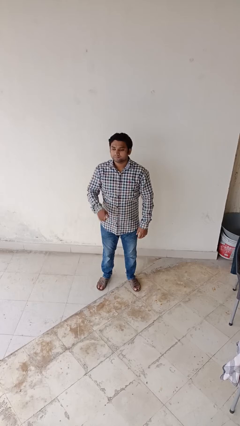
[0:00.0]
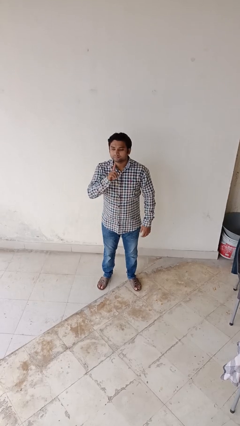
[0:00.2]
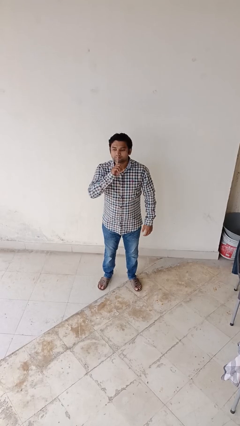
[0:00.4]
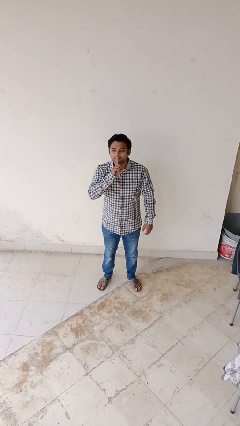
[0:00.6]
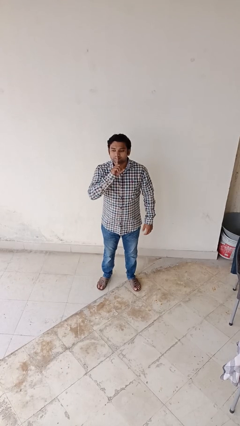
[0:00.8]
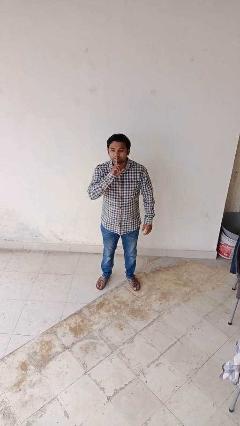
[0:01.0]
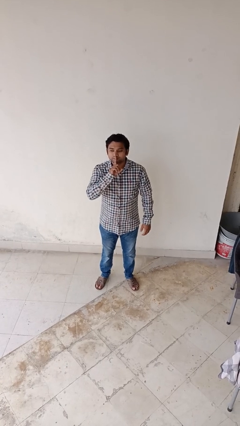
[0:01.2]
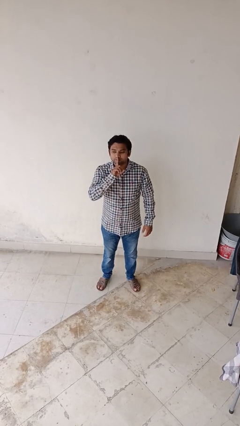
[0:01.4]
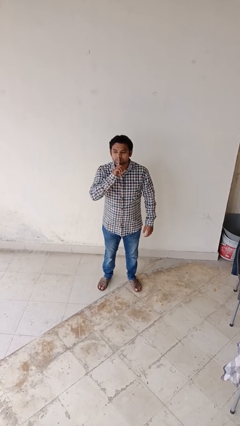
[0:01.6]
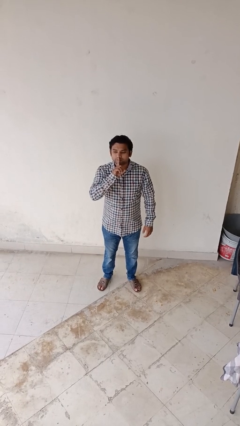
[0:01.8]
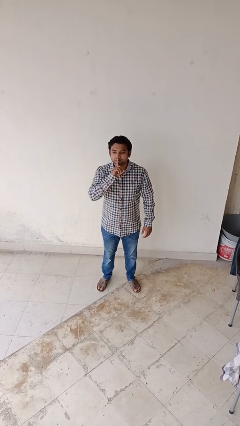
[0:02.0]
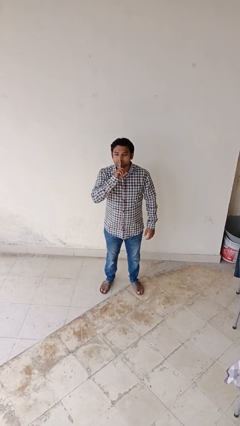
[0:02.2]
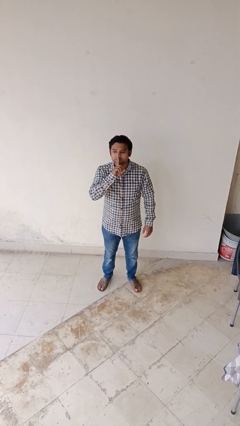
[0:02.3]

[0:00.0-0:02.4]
person gestures be quiet

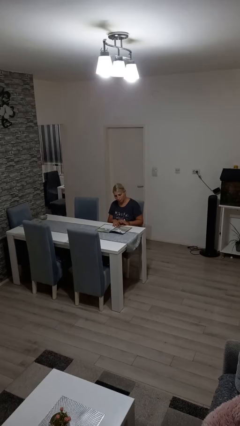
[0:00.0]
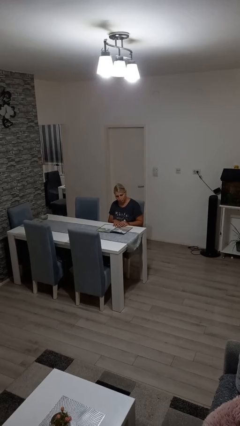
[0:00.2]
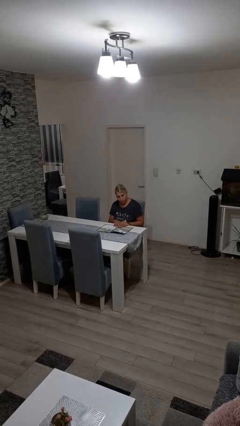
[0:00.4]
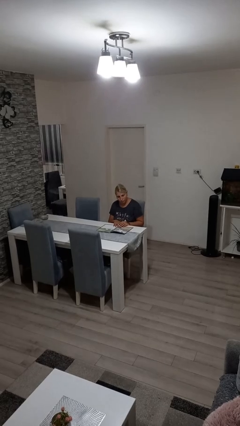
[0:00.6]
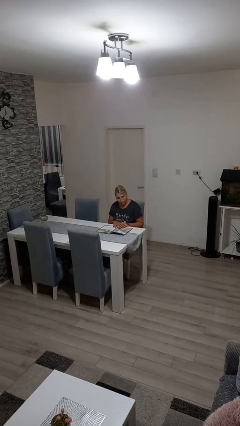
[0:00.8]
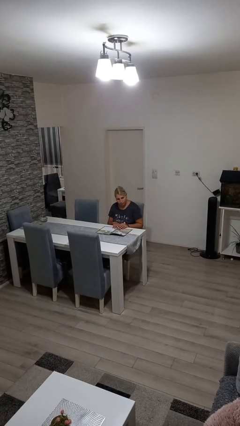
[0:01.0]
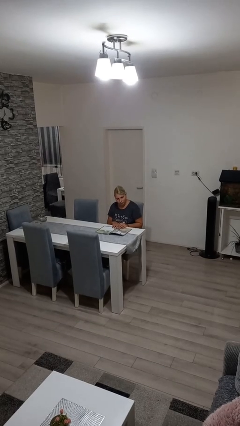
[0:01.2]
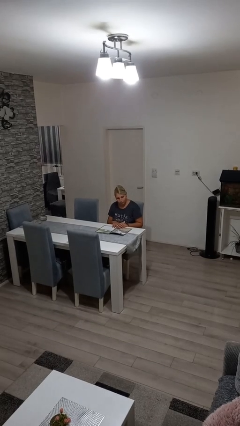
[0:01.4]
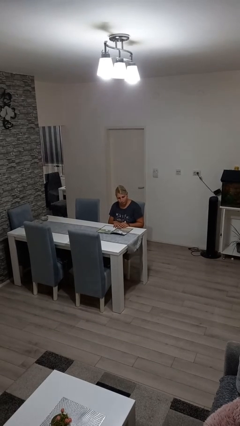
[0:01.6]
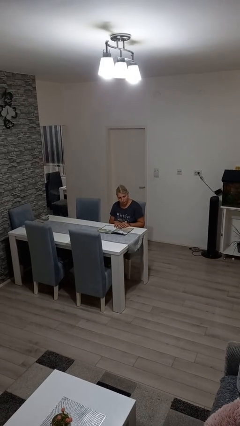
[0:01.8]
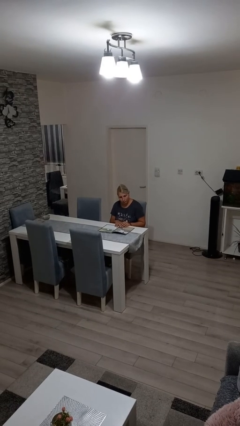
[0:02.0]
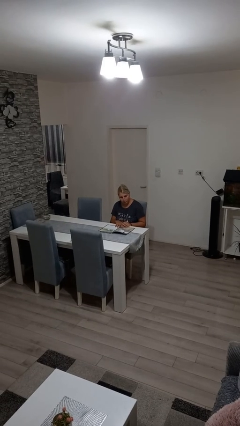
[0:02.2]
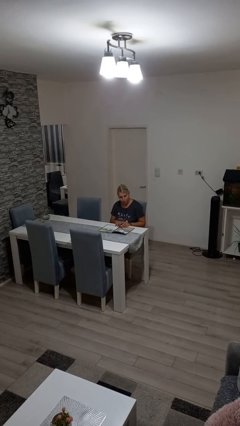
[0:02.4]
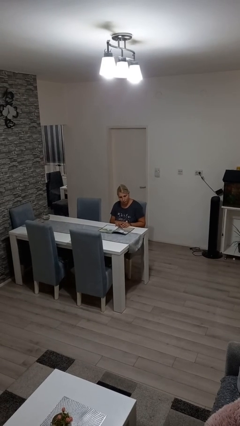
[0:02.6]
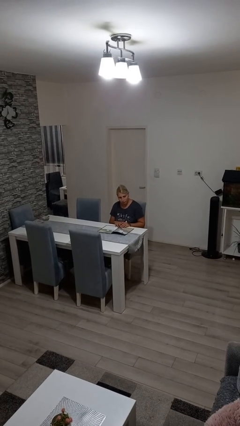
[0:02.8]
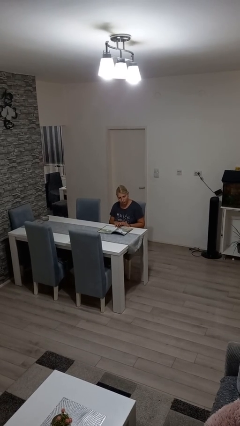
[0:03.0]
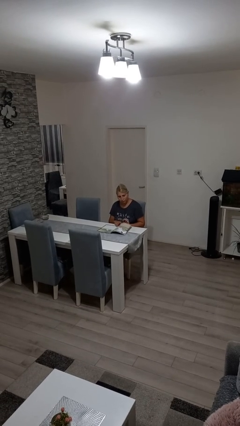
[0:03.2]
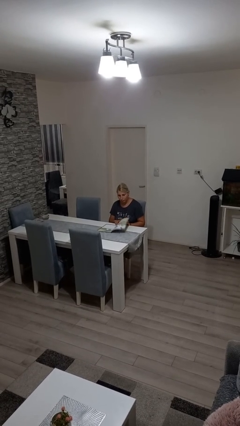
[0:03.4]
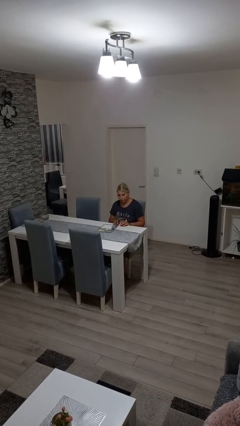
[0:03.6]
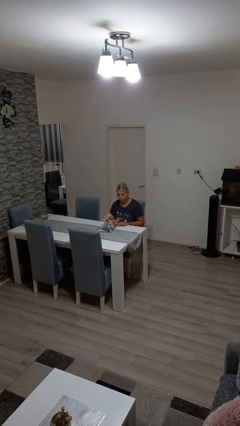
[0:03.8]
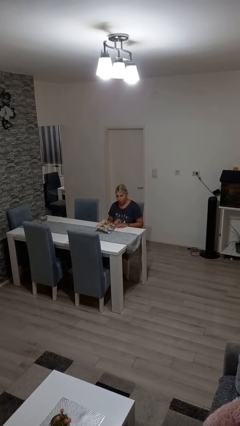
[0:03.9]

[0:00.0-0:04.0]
person reads magazine

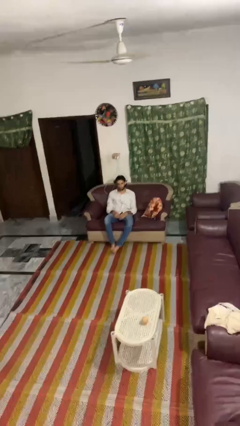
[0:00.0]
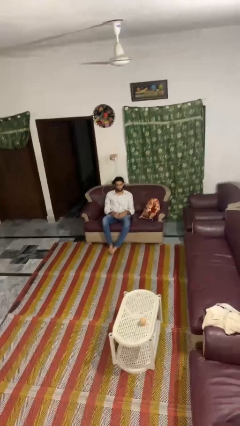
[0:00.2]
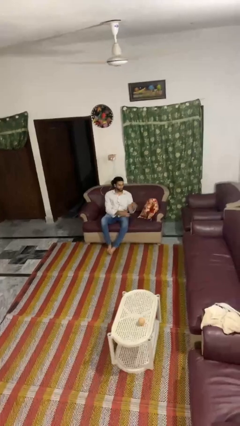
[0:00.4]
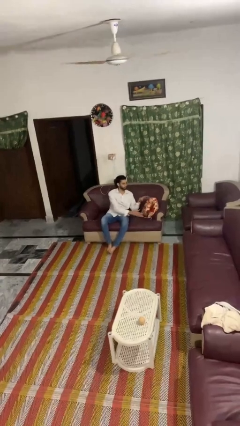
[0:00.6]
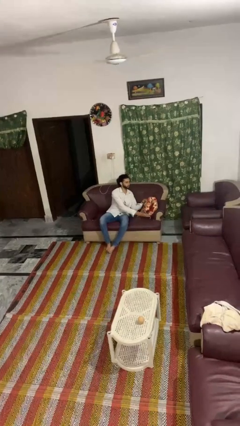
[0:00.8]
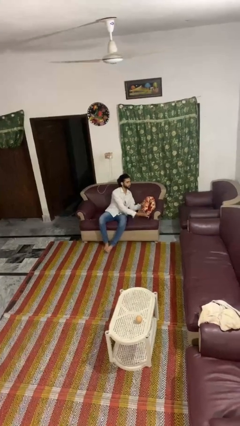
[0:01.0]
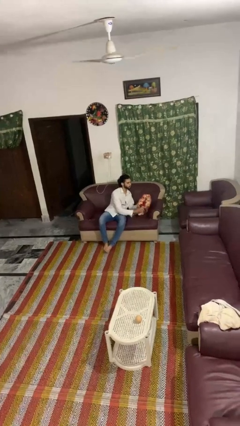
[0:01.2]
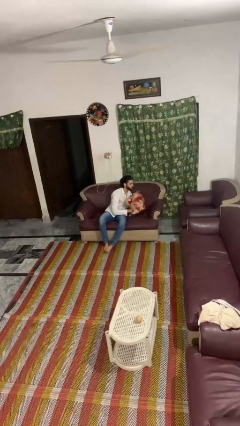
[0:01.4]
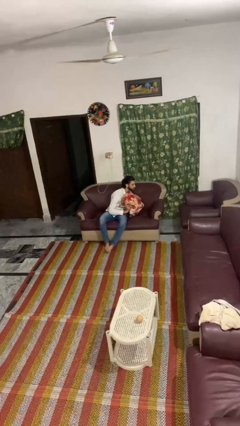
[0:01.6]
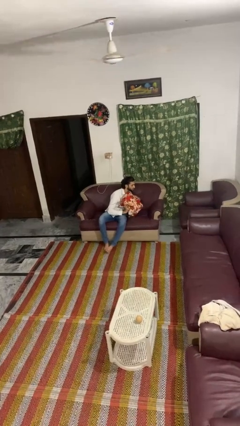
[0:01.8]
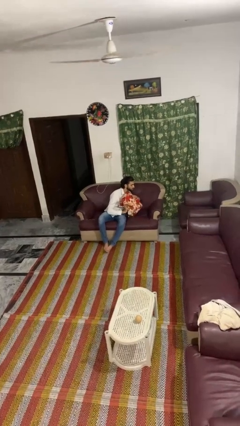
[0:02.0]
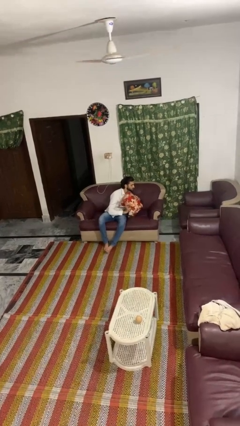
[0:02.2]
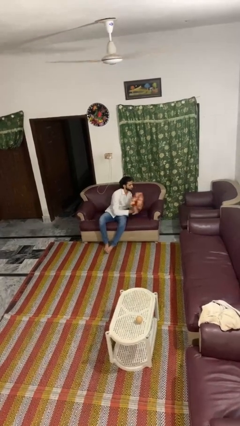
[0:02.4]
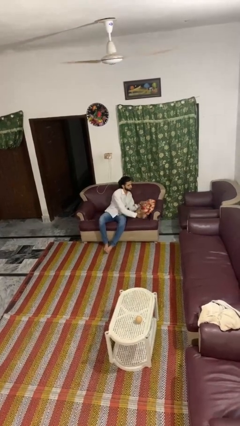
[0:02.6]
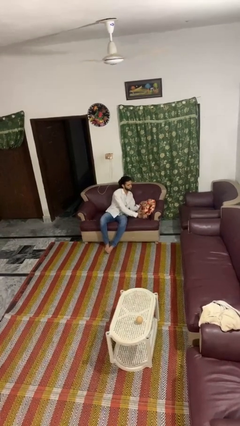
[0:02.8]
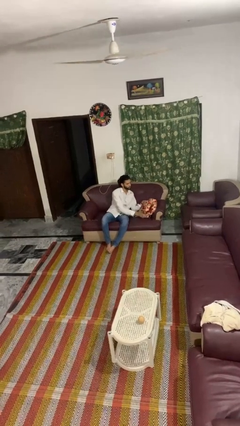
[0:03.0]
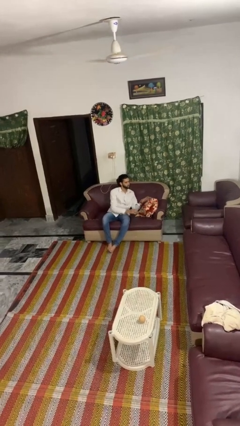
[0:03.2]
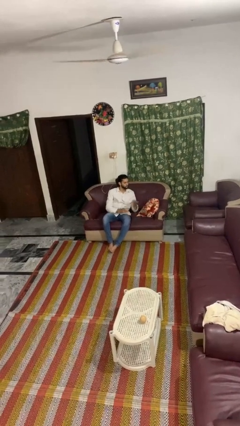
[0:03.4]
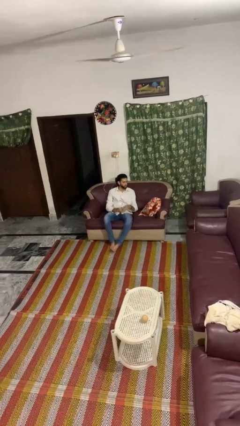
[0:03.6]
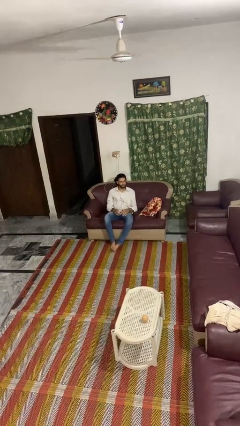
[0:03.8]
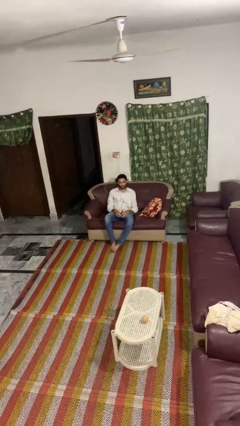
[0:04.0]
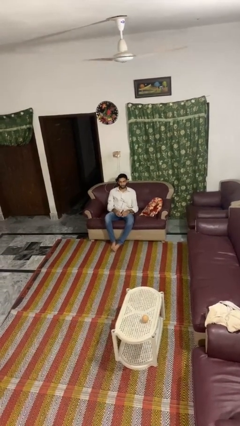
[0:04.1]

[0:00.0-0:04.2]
person searches in couch

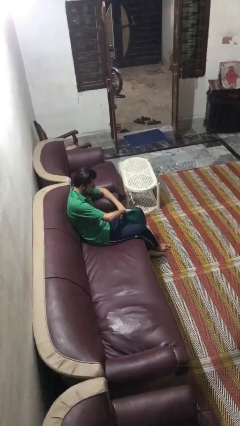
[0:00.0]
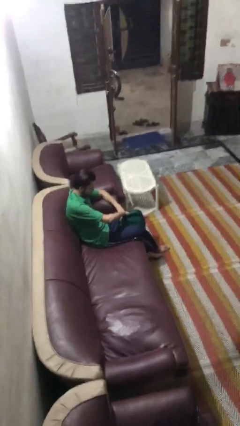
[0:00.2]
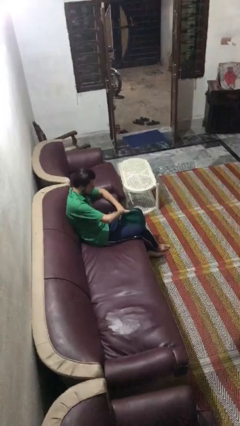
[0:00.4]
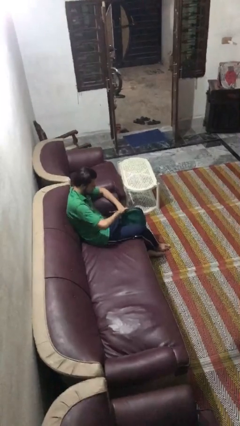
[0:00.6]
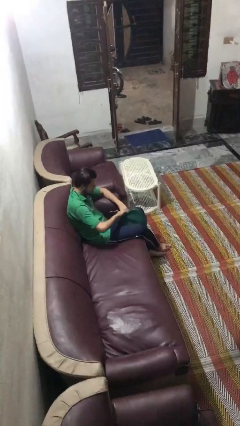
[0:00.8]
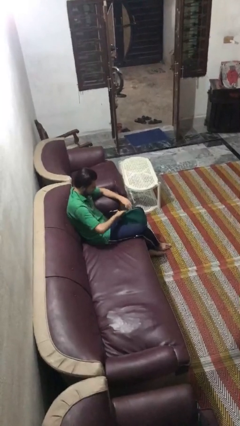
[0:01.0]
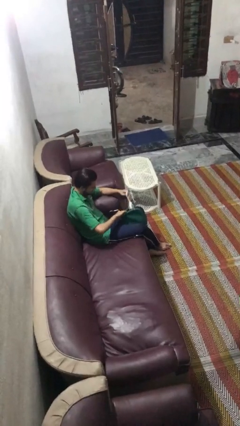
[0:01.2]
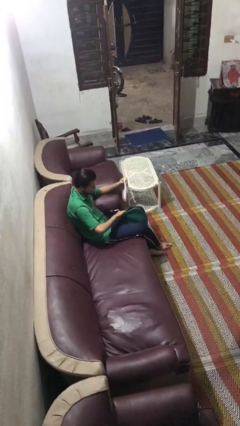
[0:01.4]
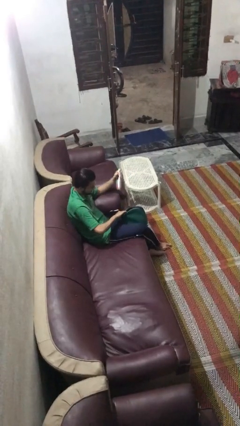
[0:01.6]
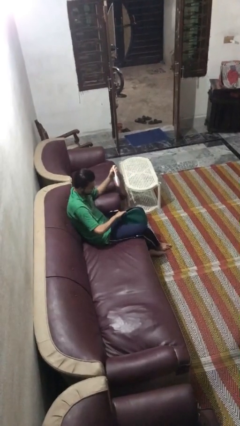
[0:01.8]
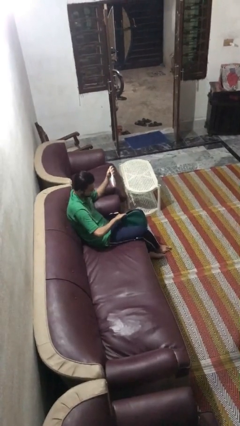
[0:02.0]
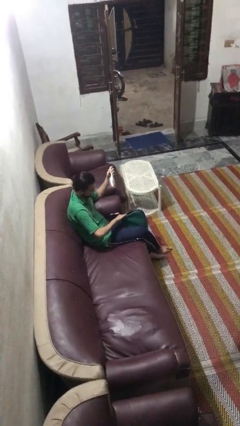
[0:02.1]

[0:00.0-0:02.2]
person takes object from purse

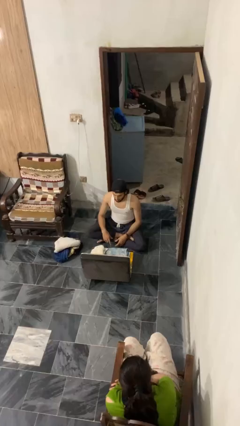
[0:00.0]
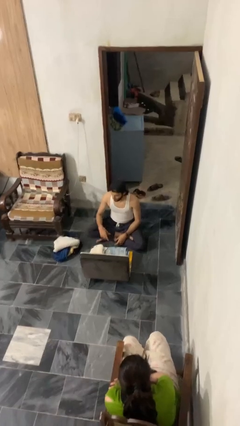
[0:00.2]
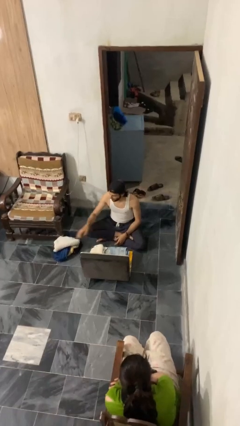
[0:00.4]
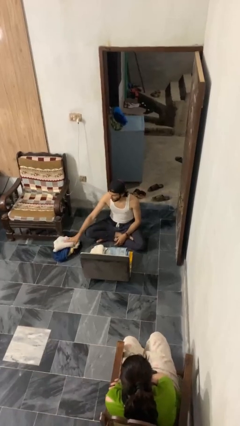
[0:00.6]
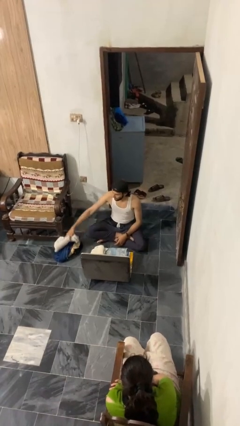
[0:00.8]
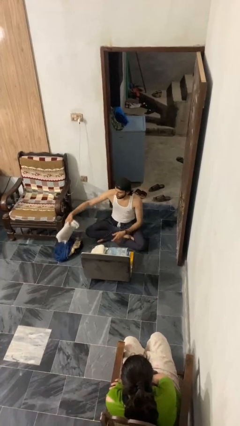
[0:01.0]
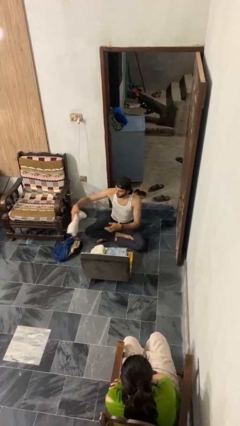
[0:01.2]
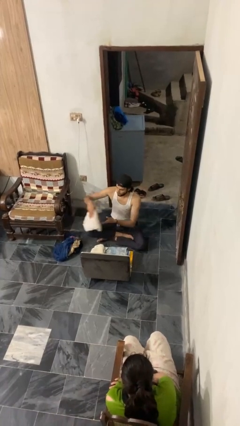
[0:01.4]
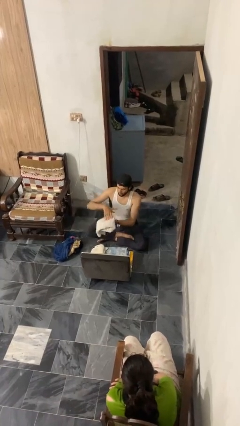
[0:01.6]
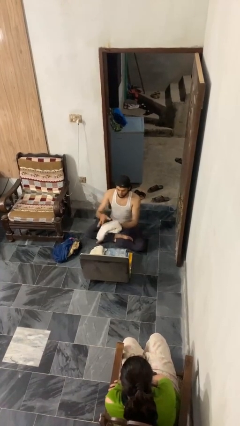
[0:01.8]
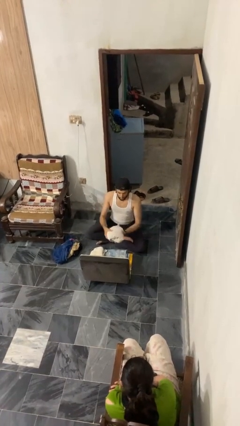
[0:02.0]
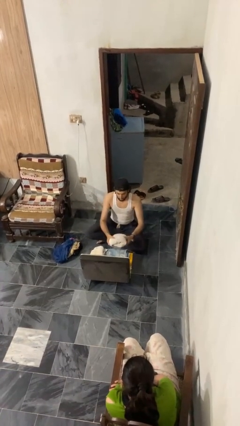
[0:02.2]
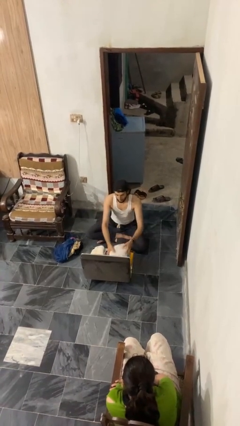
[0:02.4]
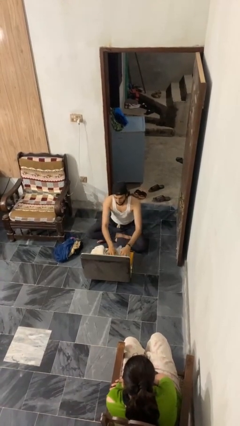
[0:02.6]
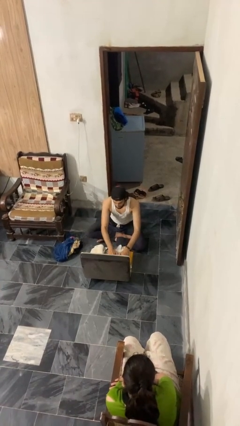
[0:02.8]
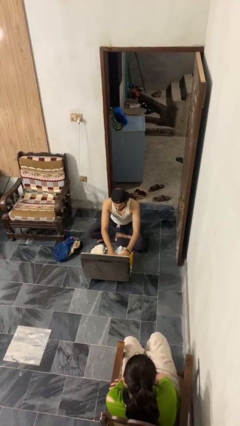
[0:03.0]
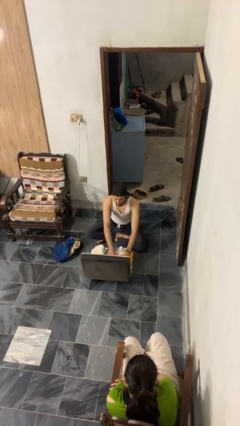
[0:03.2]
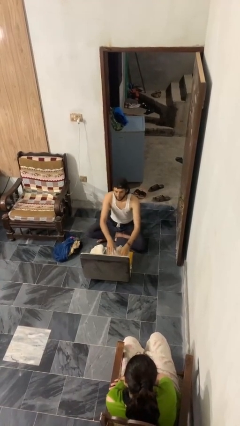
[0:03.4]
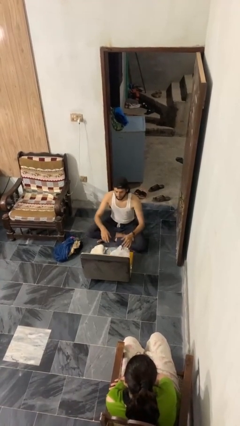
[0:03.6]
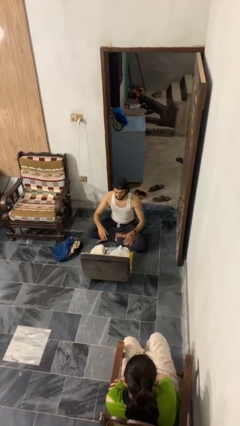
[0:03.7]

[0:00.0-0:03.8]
person loads clothes into suitcase

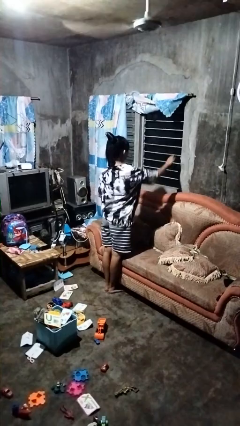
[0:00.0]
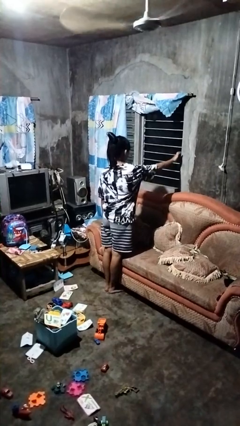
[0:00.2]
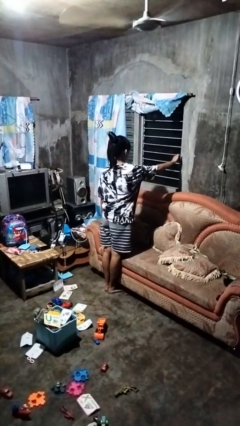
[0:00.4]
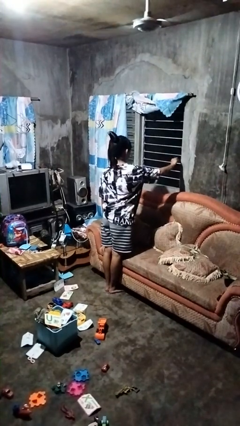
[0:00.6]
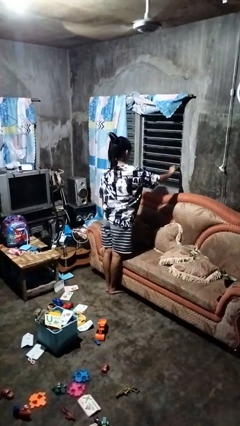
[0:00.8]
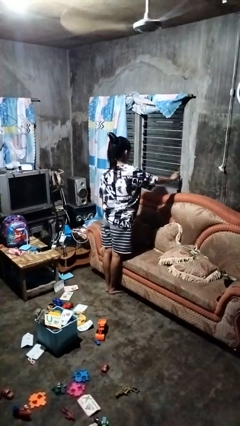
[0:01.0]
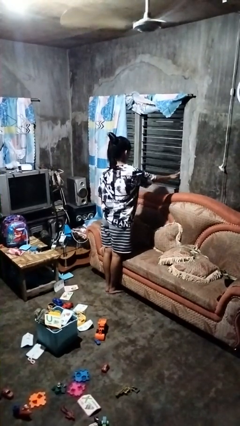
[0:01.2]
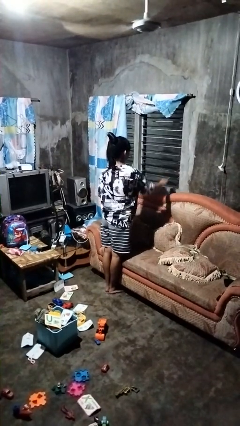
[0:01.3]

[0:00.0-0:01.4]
person opens home window
